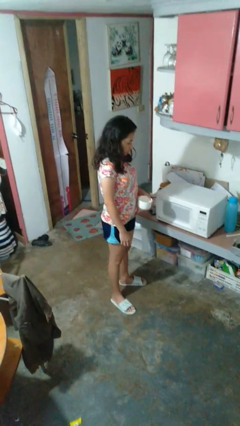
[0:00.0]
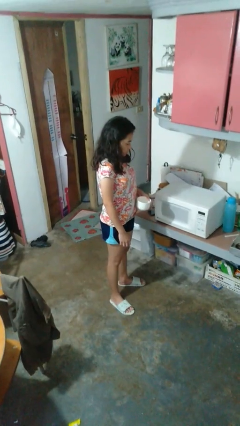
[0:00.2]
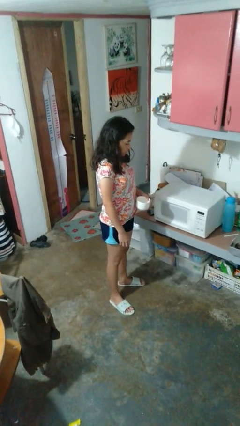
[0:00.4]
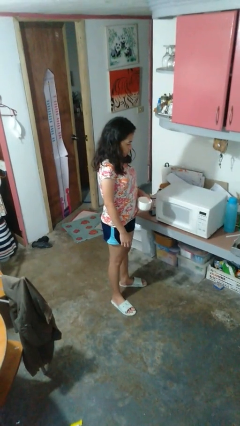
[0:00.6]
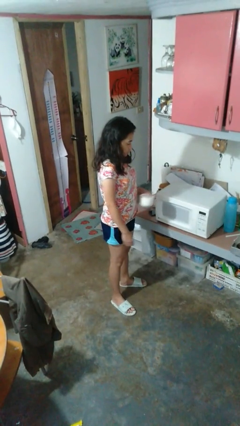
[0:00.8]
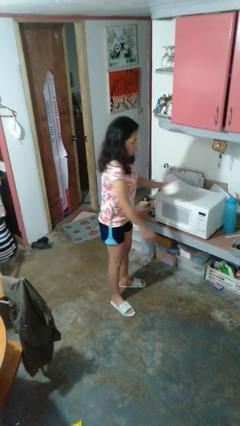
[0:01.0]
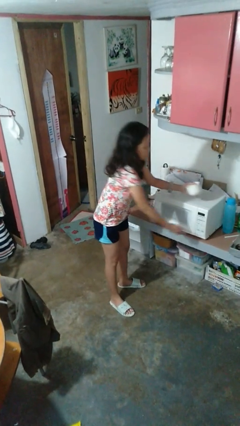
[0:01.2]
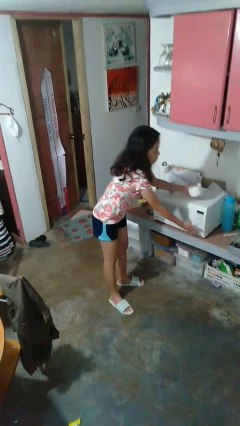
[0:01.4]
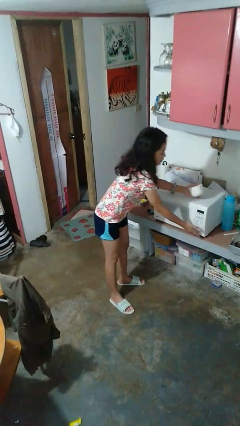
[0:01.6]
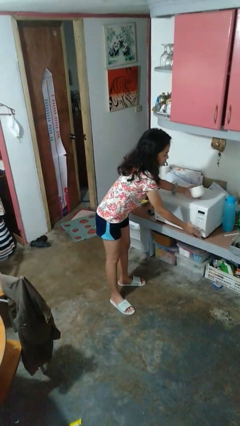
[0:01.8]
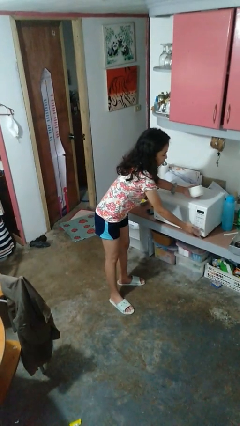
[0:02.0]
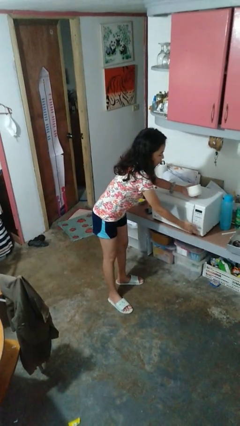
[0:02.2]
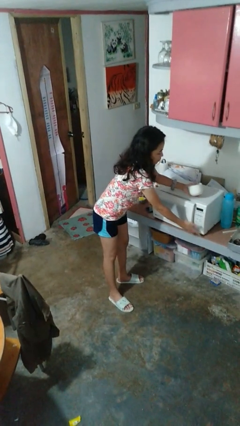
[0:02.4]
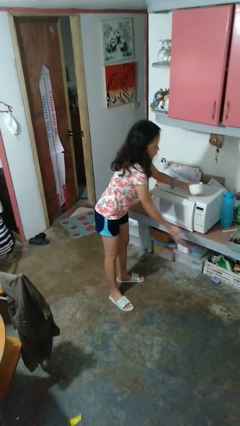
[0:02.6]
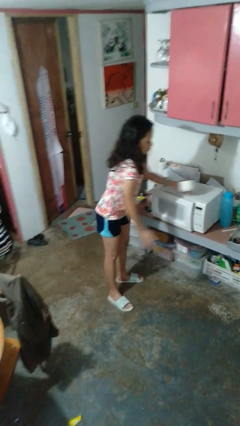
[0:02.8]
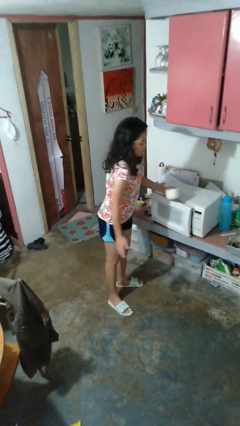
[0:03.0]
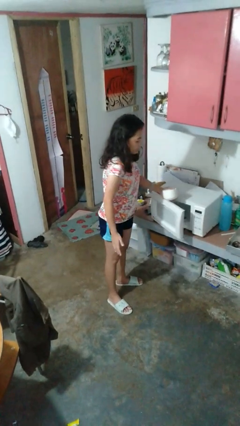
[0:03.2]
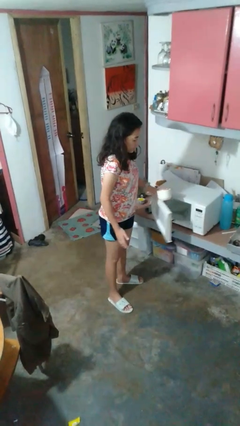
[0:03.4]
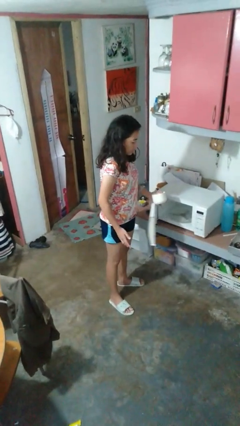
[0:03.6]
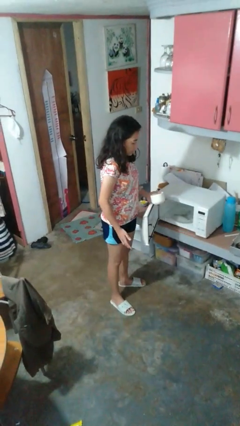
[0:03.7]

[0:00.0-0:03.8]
person opens microwave

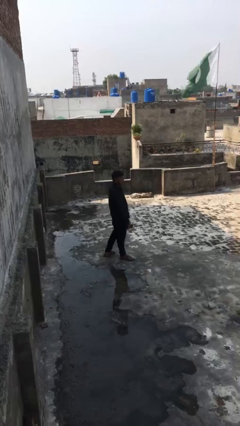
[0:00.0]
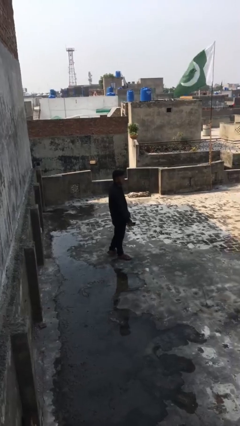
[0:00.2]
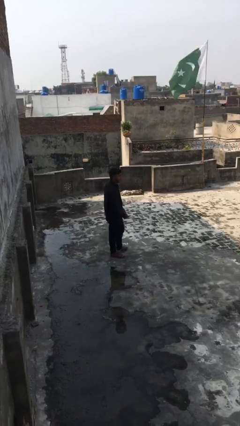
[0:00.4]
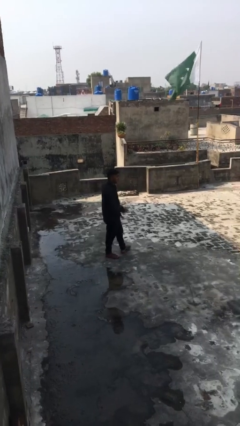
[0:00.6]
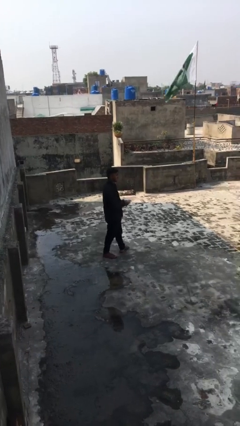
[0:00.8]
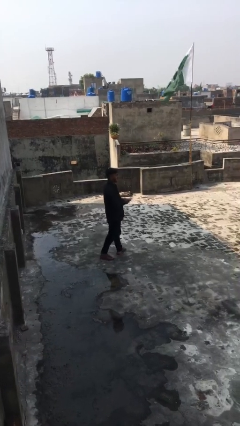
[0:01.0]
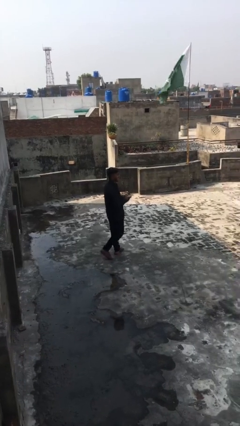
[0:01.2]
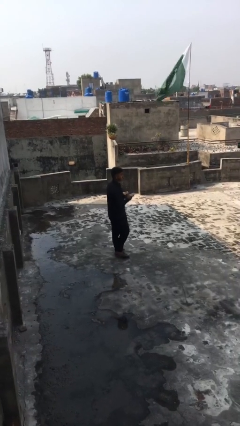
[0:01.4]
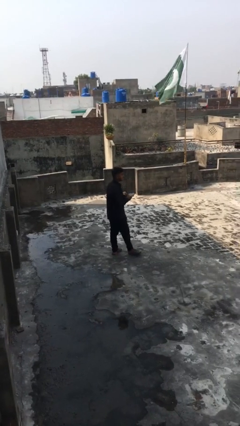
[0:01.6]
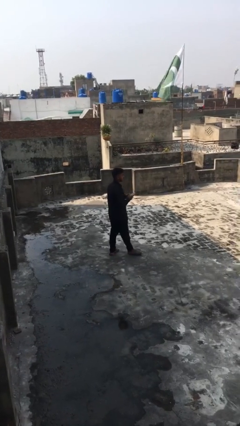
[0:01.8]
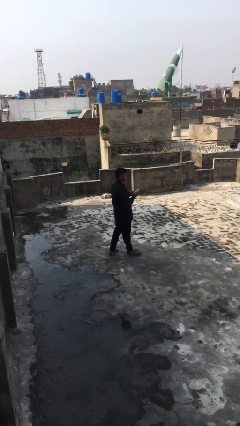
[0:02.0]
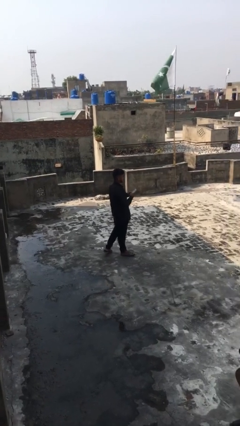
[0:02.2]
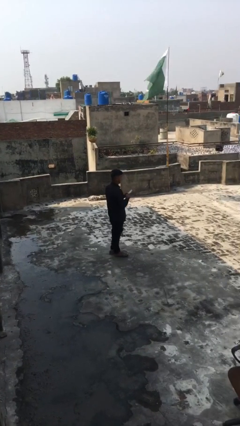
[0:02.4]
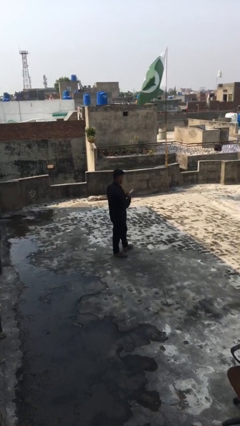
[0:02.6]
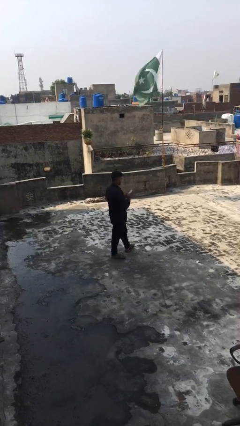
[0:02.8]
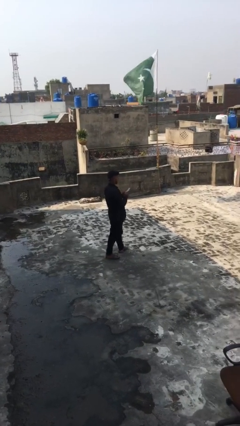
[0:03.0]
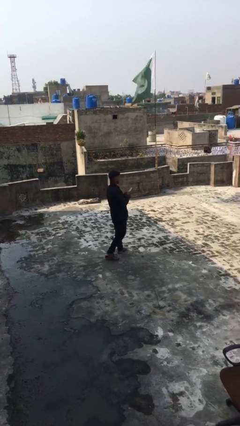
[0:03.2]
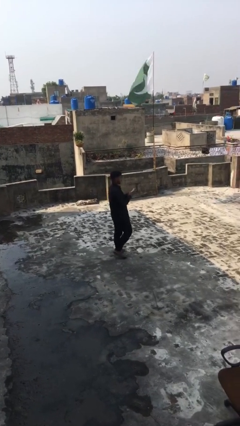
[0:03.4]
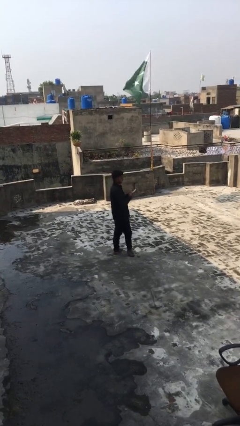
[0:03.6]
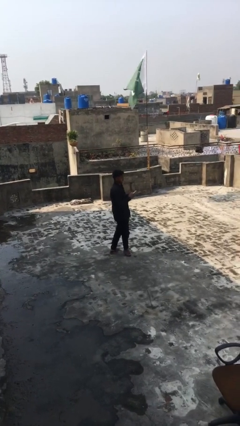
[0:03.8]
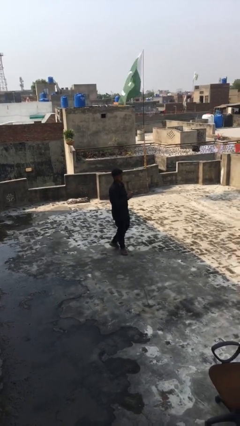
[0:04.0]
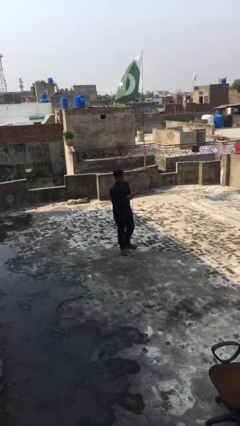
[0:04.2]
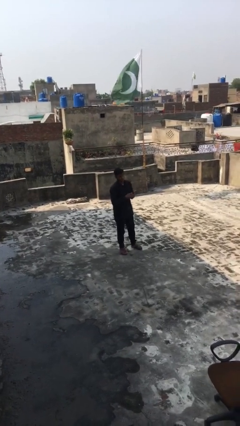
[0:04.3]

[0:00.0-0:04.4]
person texts on phone

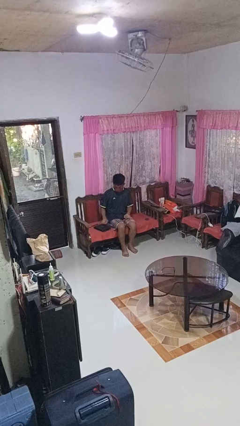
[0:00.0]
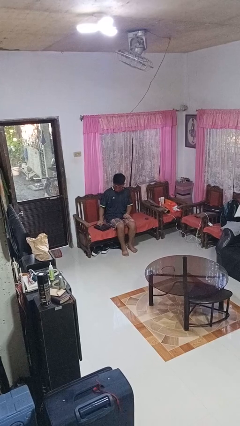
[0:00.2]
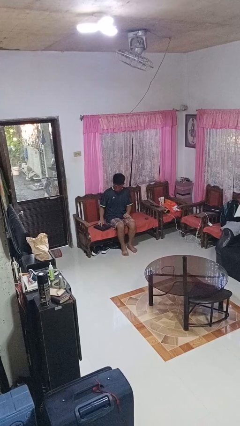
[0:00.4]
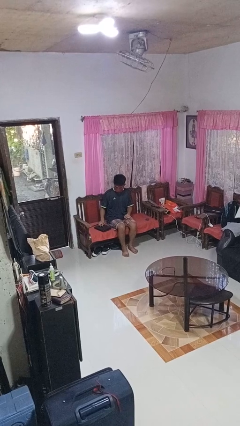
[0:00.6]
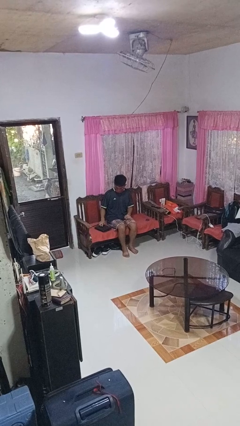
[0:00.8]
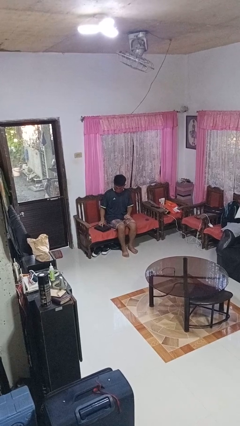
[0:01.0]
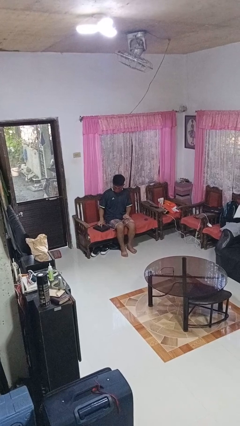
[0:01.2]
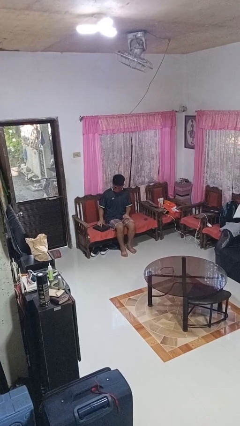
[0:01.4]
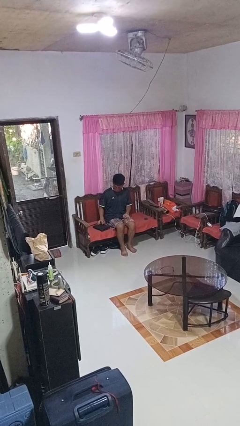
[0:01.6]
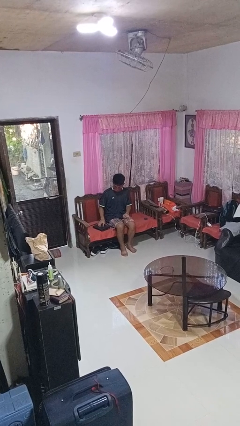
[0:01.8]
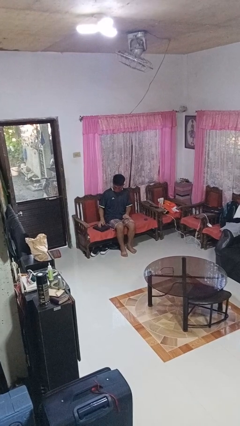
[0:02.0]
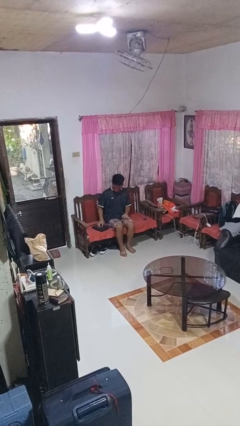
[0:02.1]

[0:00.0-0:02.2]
person taps object with finger

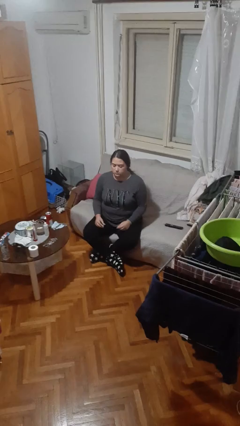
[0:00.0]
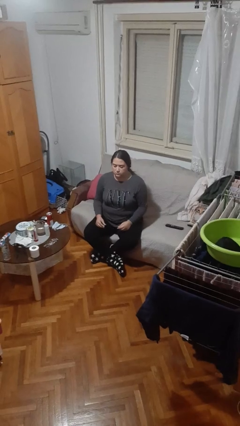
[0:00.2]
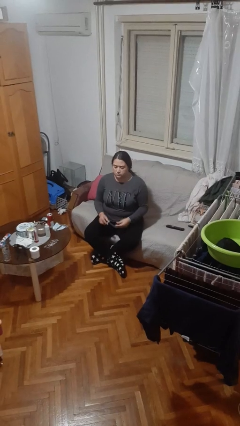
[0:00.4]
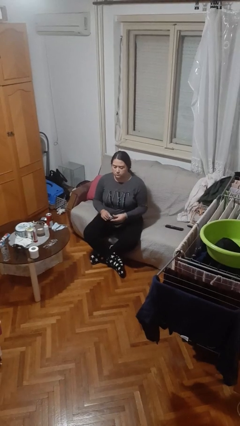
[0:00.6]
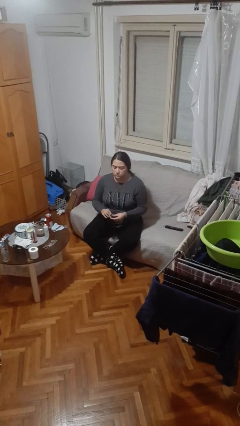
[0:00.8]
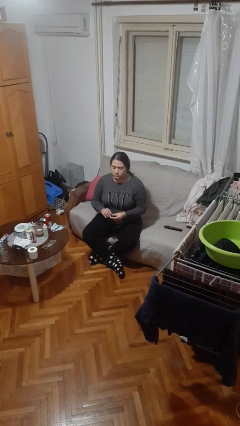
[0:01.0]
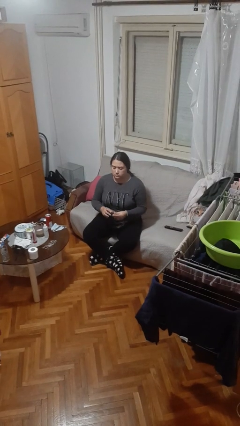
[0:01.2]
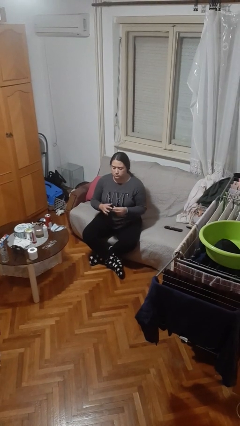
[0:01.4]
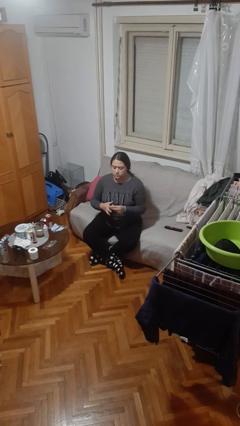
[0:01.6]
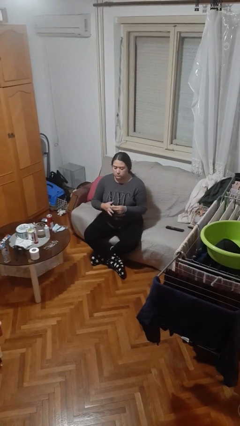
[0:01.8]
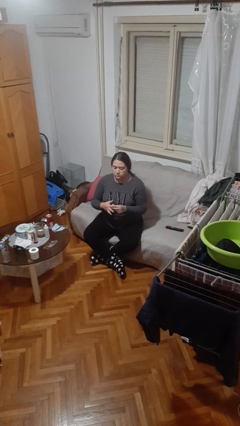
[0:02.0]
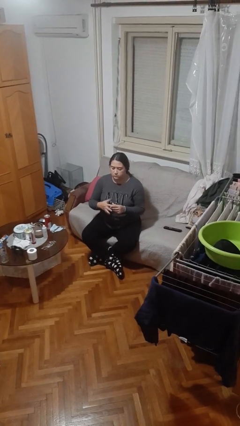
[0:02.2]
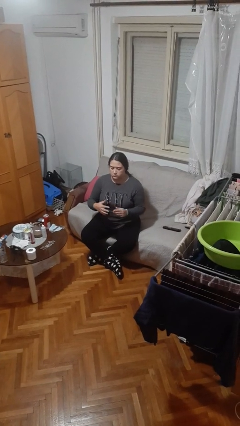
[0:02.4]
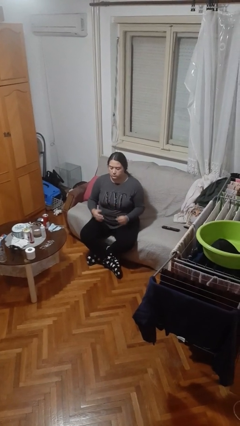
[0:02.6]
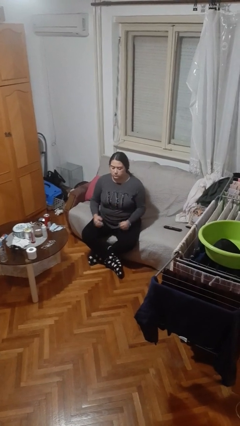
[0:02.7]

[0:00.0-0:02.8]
person puts on ring

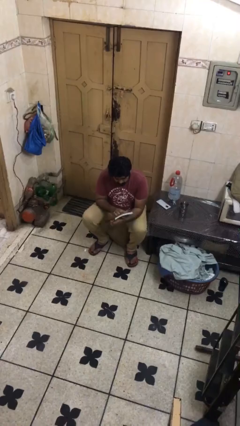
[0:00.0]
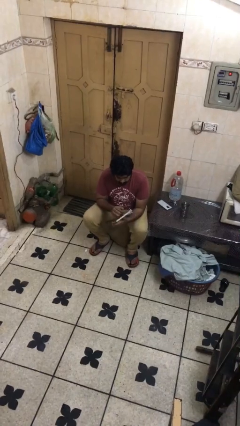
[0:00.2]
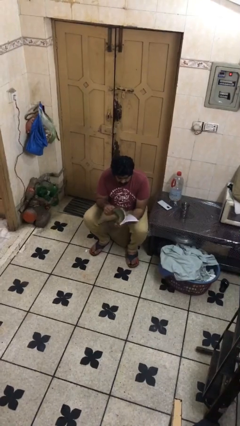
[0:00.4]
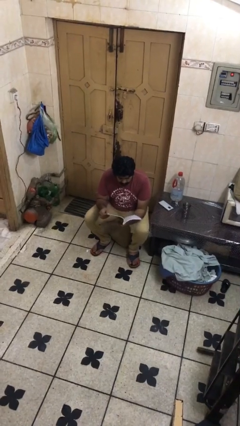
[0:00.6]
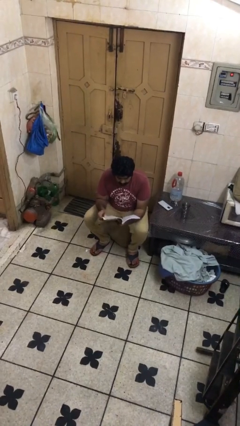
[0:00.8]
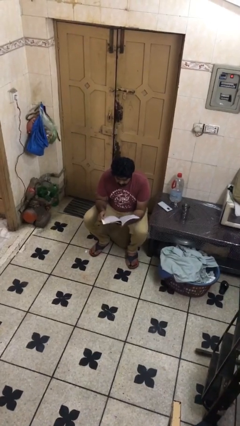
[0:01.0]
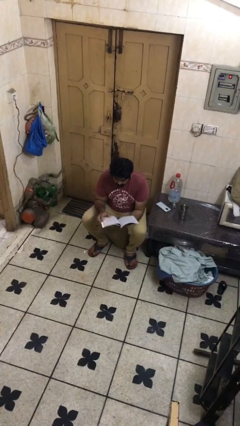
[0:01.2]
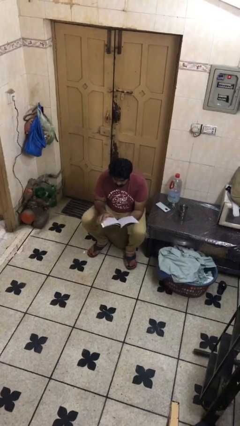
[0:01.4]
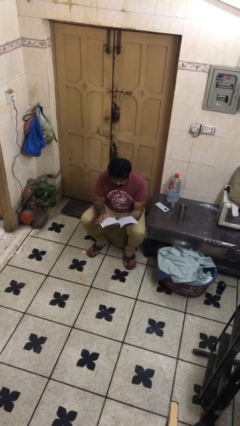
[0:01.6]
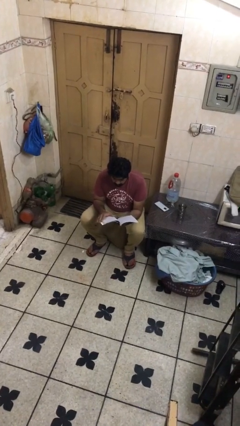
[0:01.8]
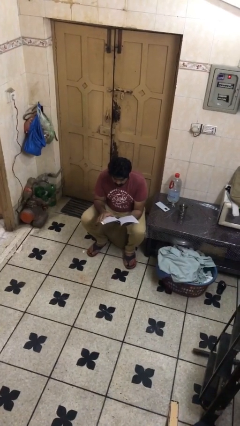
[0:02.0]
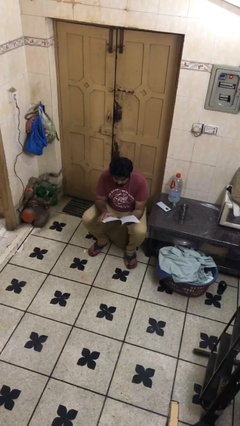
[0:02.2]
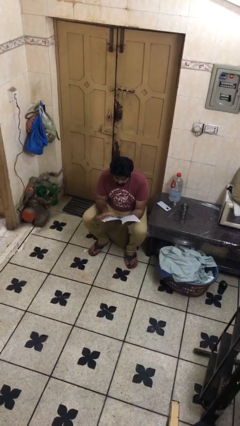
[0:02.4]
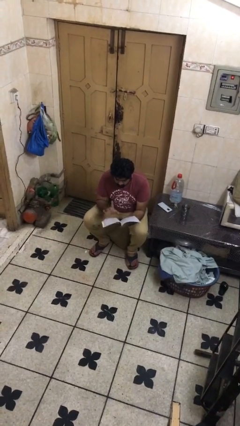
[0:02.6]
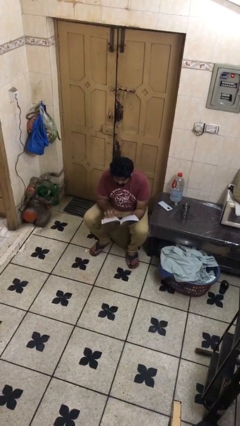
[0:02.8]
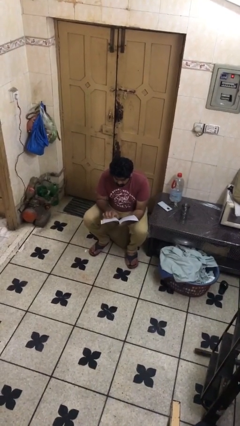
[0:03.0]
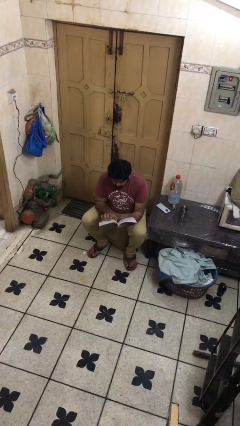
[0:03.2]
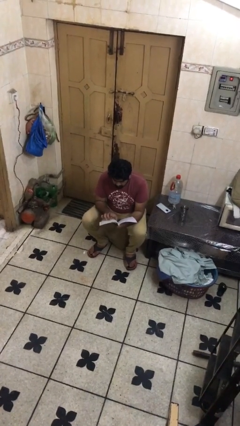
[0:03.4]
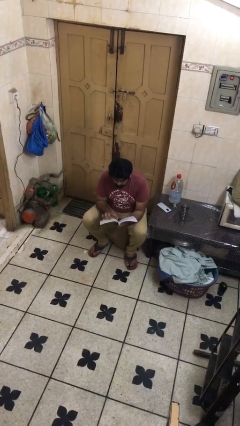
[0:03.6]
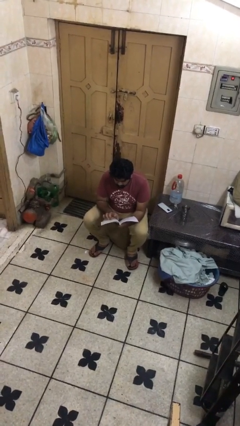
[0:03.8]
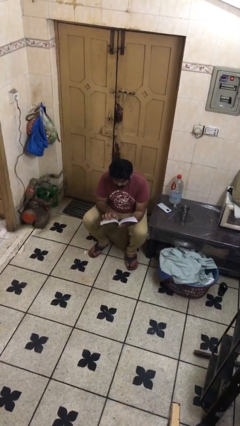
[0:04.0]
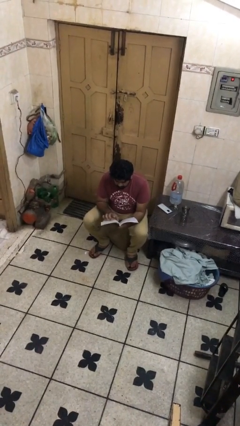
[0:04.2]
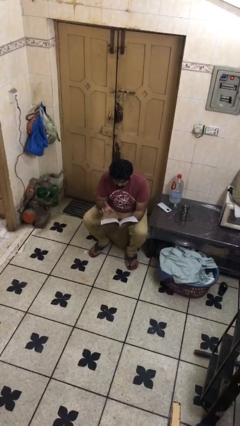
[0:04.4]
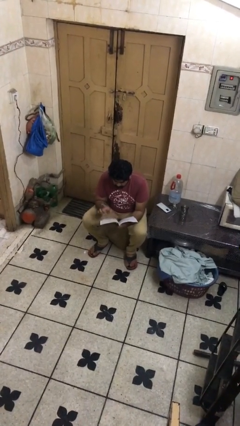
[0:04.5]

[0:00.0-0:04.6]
person reads document
